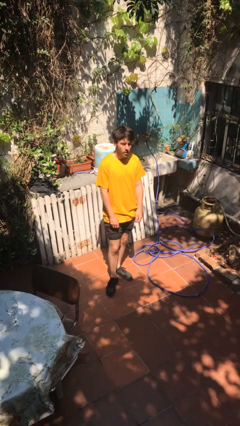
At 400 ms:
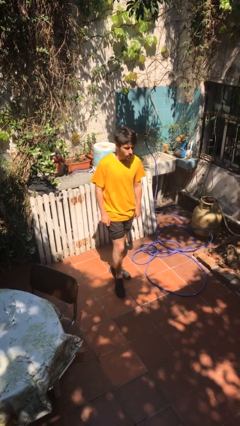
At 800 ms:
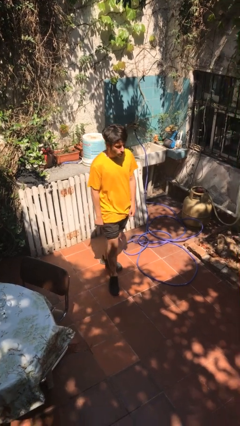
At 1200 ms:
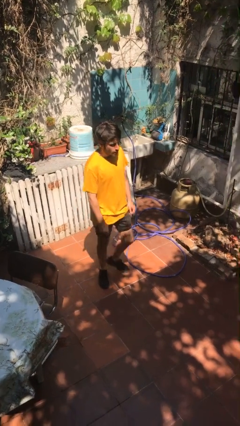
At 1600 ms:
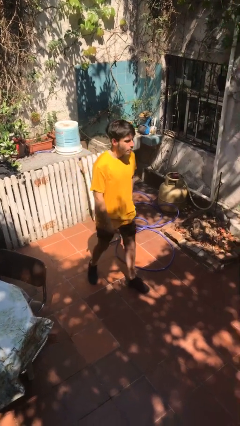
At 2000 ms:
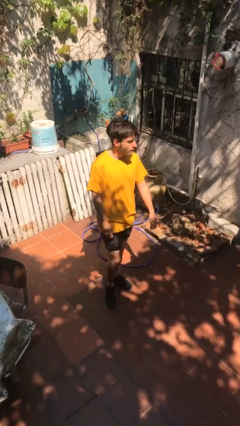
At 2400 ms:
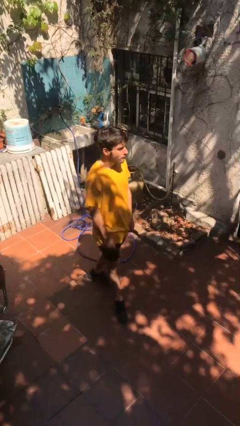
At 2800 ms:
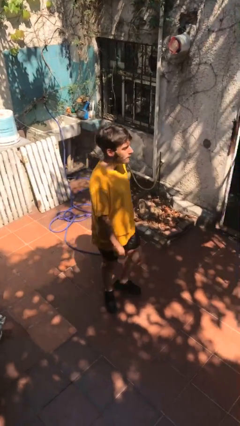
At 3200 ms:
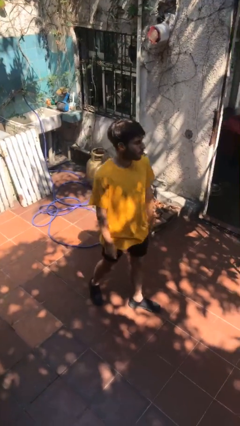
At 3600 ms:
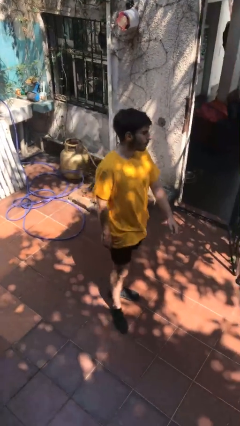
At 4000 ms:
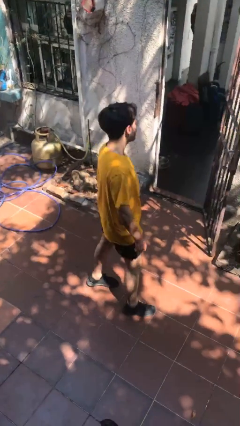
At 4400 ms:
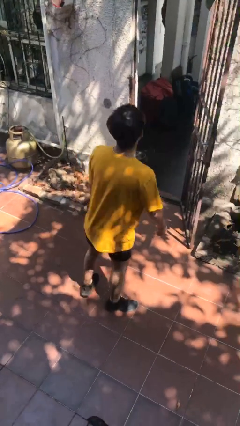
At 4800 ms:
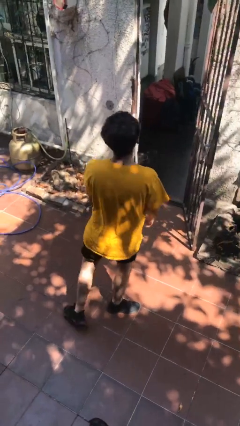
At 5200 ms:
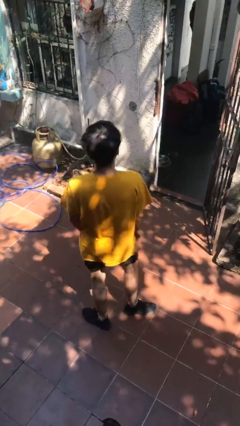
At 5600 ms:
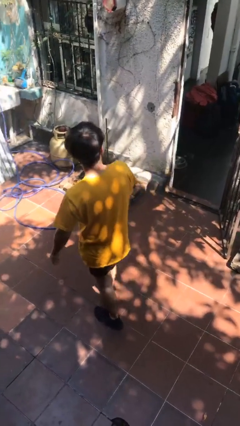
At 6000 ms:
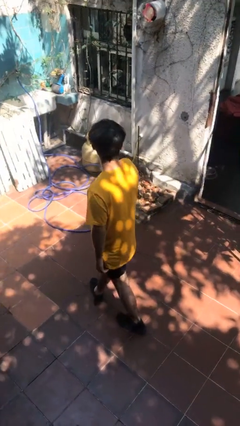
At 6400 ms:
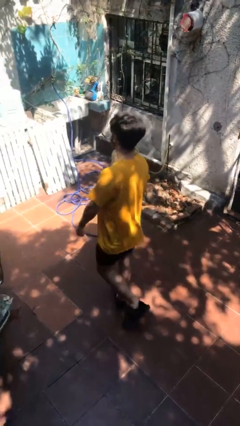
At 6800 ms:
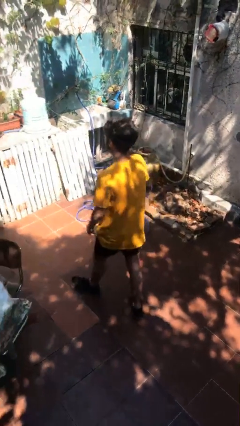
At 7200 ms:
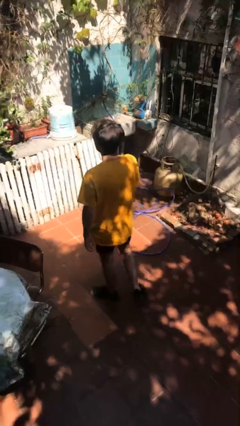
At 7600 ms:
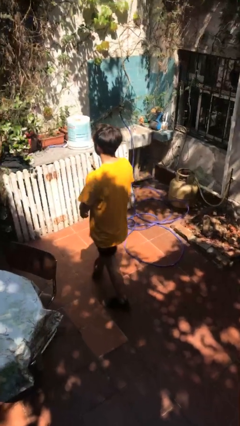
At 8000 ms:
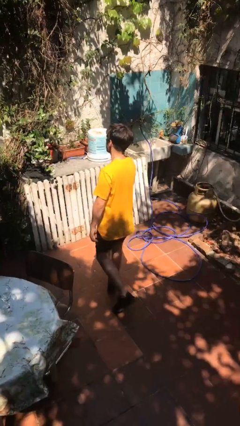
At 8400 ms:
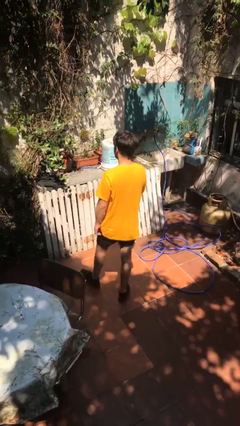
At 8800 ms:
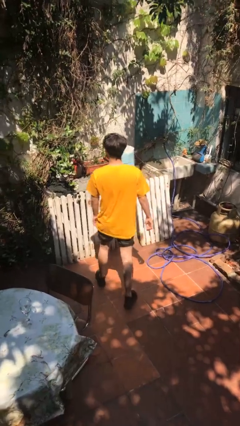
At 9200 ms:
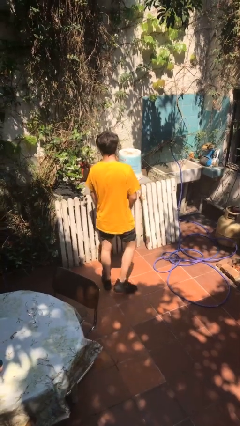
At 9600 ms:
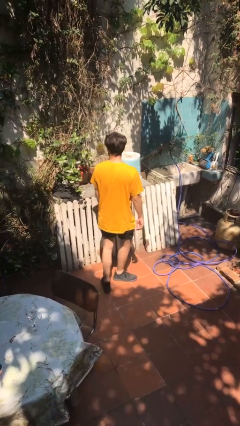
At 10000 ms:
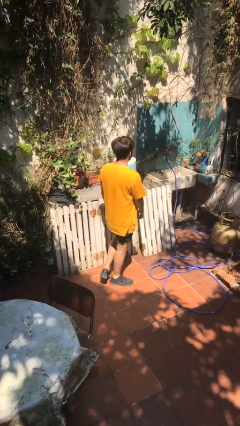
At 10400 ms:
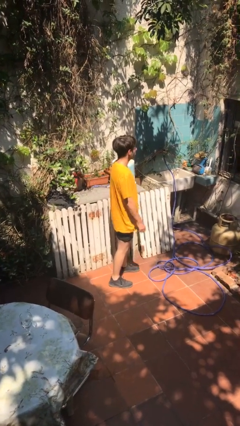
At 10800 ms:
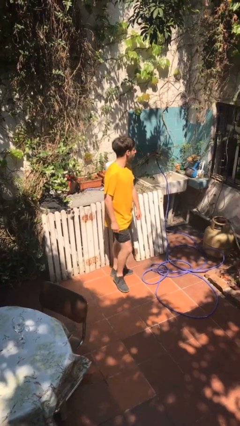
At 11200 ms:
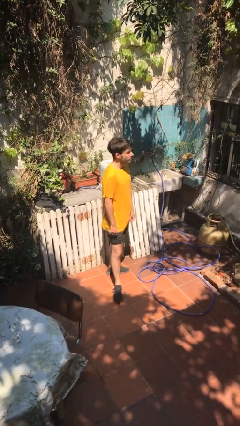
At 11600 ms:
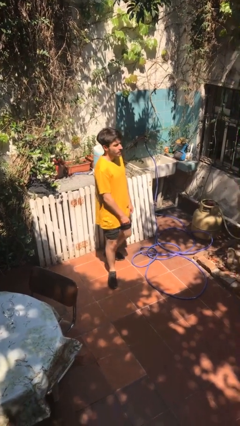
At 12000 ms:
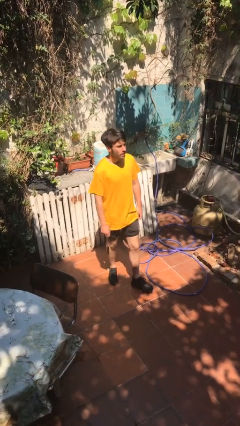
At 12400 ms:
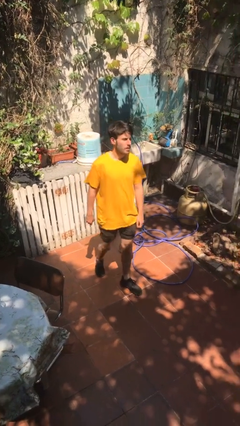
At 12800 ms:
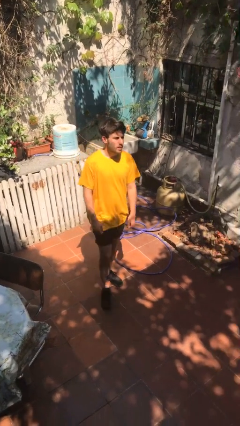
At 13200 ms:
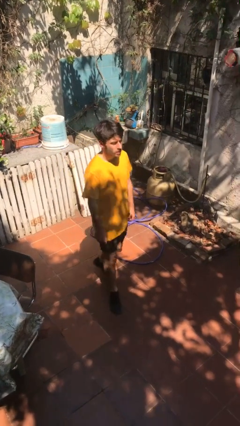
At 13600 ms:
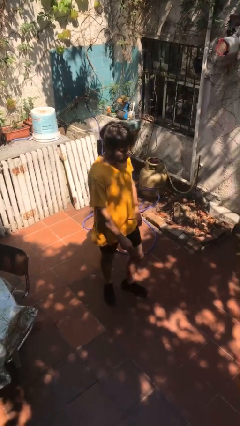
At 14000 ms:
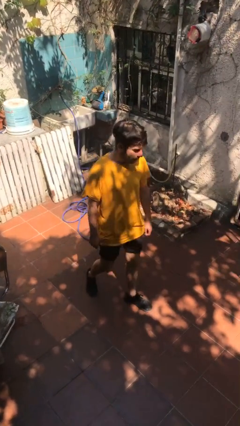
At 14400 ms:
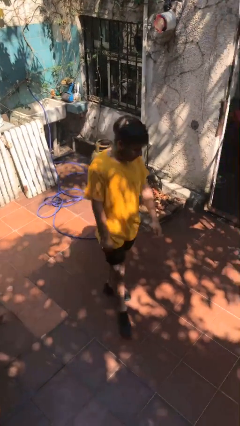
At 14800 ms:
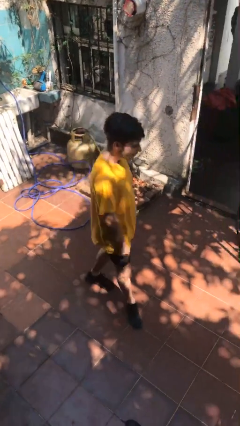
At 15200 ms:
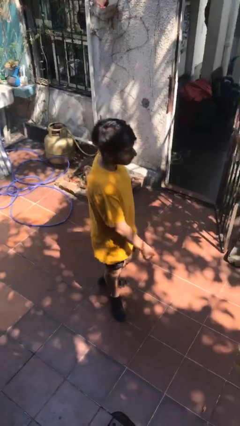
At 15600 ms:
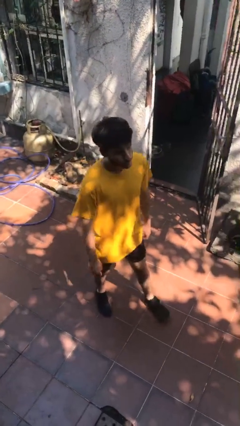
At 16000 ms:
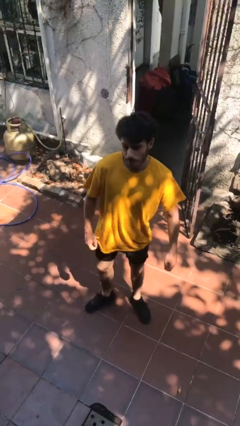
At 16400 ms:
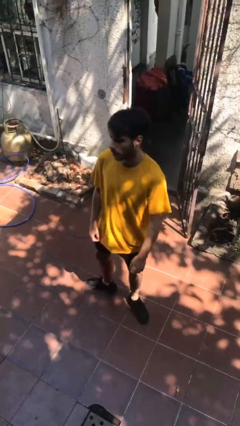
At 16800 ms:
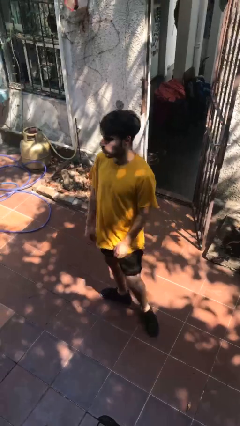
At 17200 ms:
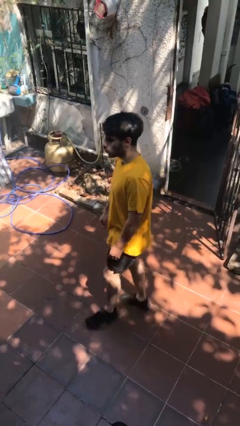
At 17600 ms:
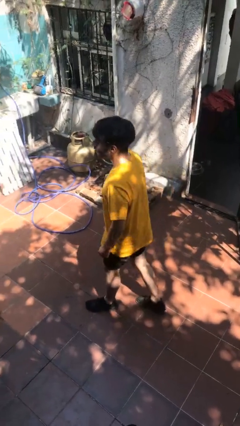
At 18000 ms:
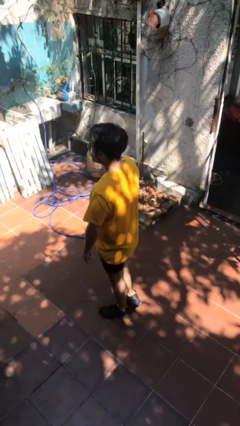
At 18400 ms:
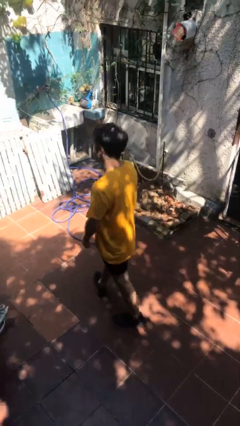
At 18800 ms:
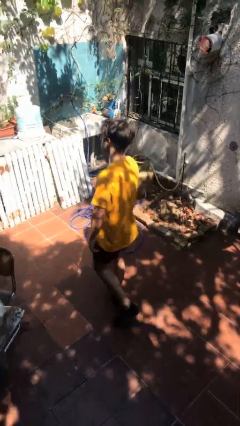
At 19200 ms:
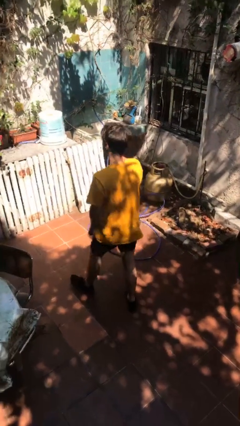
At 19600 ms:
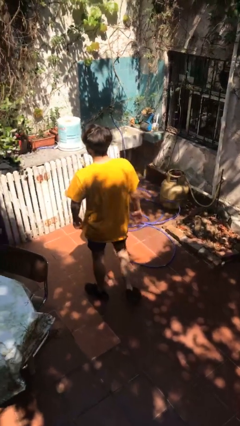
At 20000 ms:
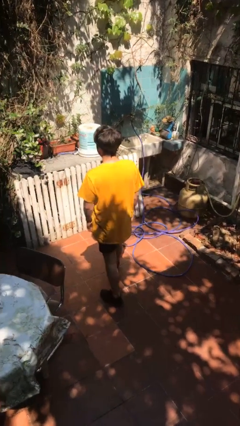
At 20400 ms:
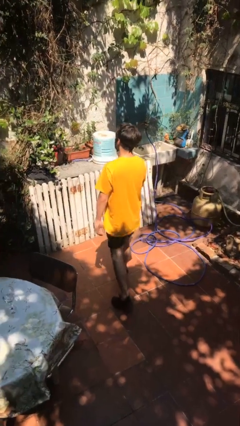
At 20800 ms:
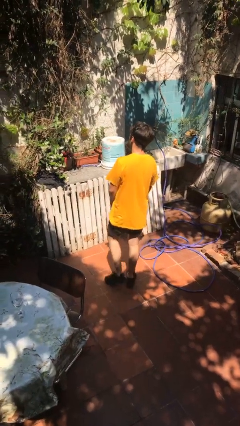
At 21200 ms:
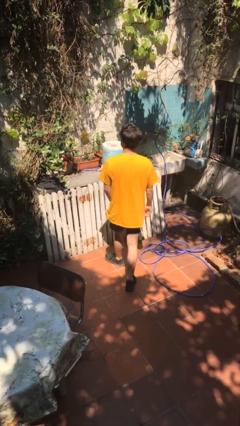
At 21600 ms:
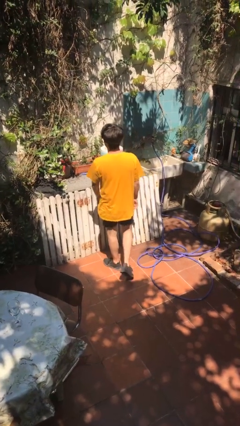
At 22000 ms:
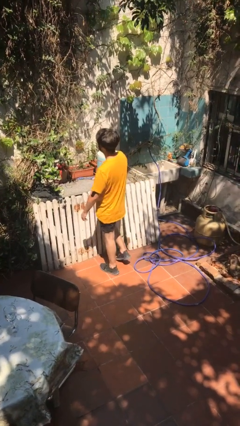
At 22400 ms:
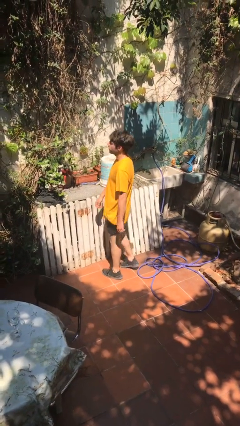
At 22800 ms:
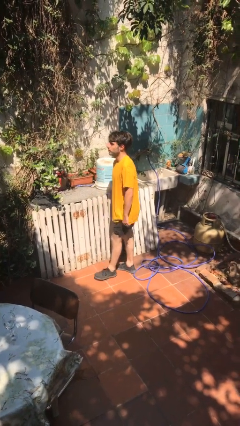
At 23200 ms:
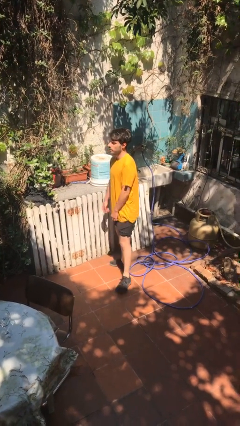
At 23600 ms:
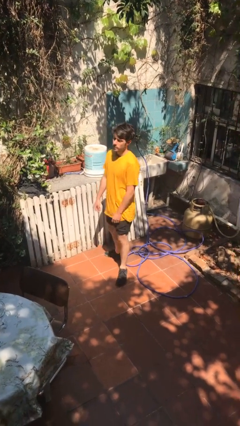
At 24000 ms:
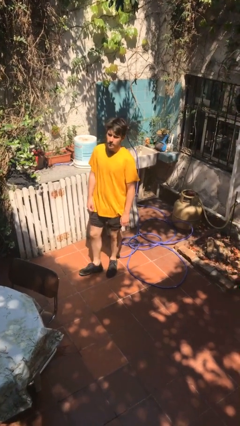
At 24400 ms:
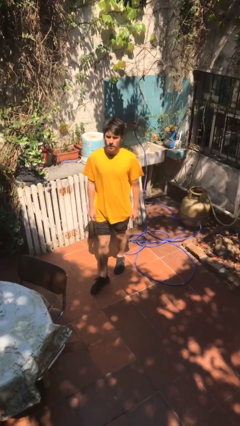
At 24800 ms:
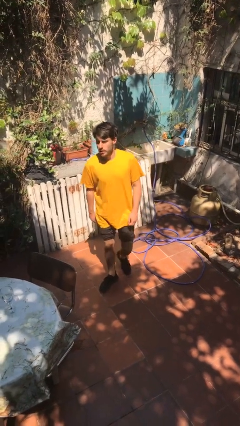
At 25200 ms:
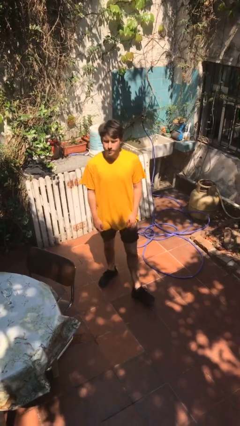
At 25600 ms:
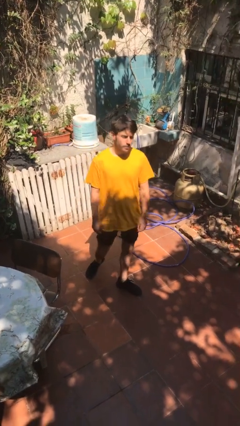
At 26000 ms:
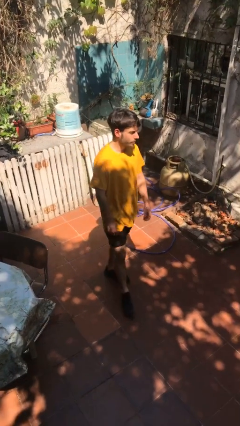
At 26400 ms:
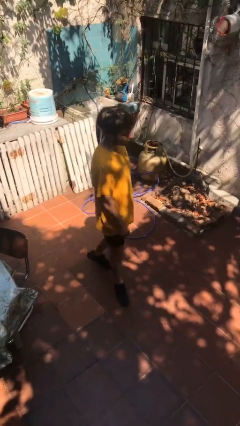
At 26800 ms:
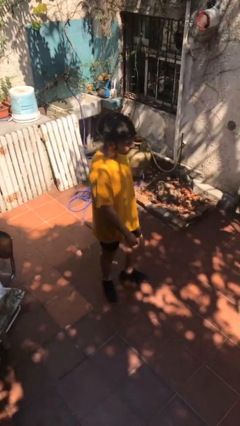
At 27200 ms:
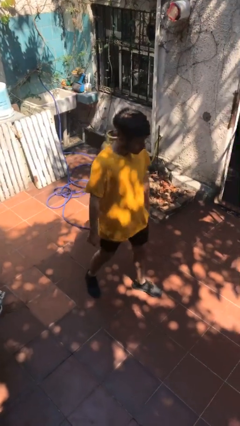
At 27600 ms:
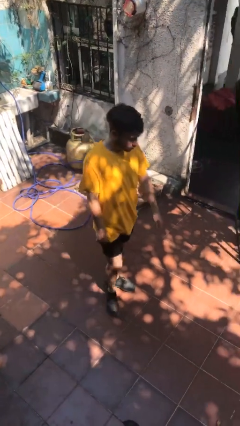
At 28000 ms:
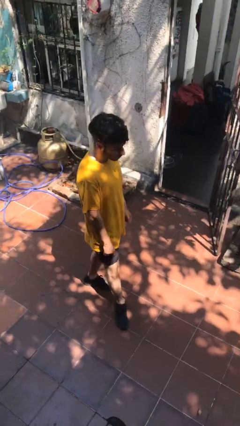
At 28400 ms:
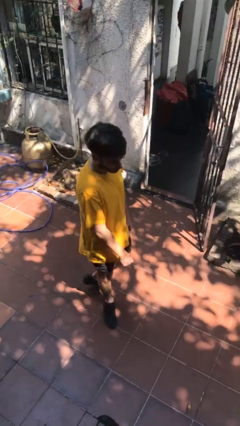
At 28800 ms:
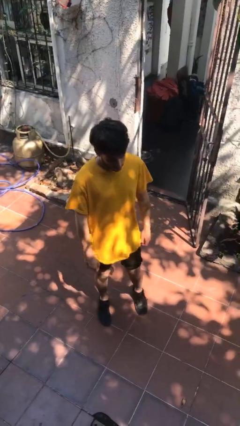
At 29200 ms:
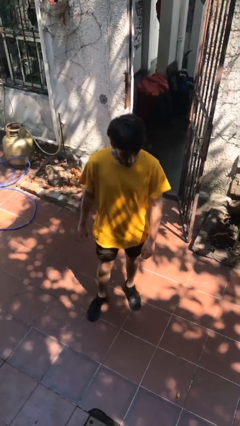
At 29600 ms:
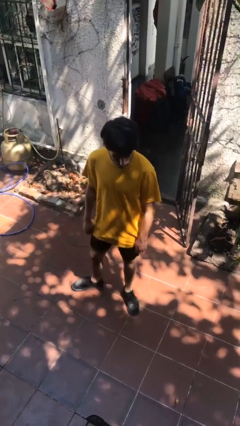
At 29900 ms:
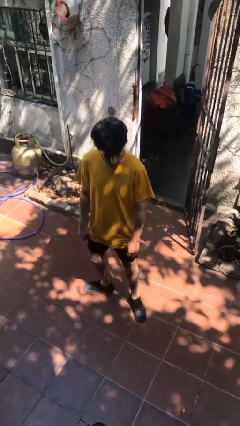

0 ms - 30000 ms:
person walks

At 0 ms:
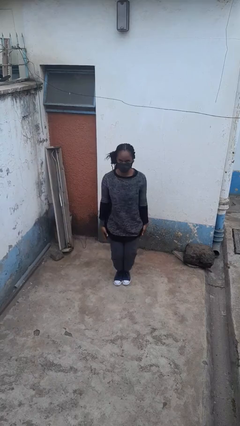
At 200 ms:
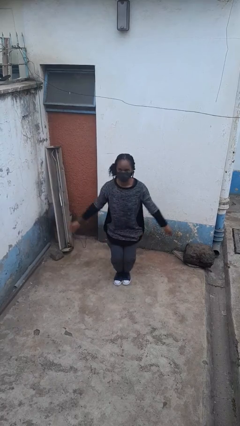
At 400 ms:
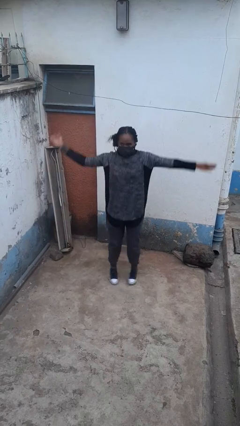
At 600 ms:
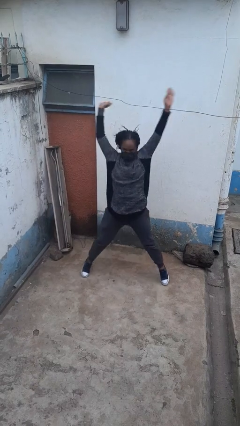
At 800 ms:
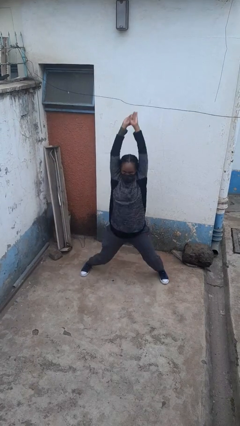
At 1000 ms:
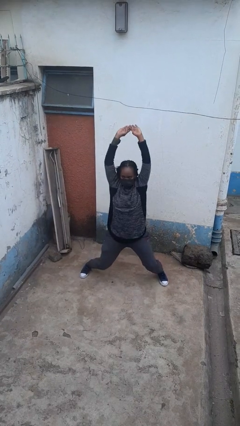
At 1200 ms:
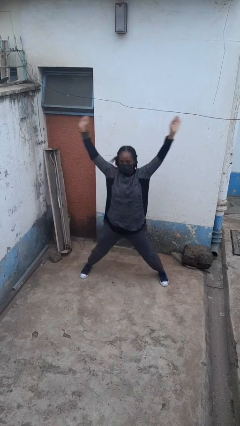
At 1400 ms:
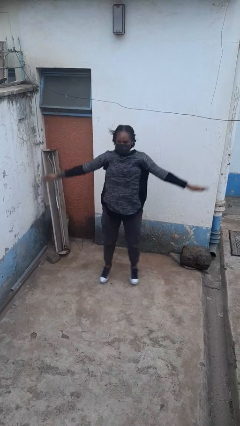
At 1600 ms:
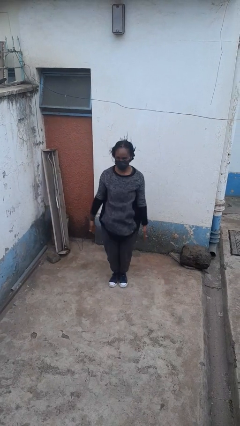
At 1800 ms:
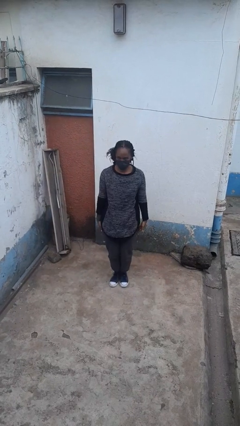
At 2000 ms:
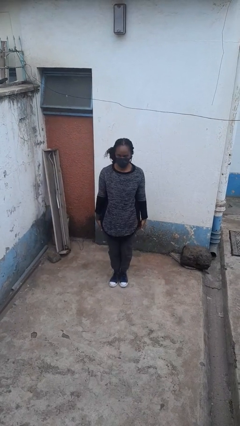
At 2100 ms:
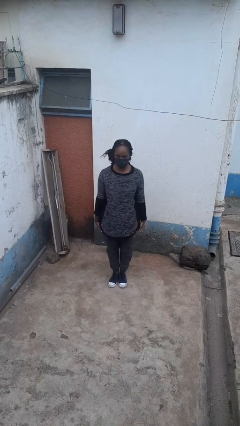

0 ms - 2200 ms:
person exercises with jumping jacks

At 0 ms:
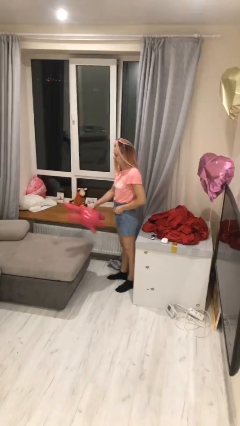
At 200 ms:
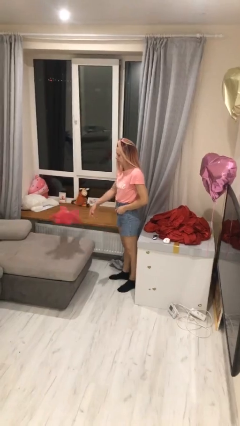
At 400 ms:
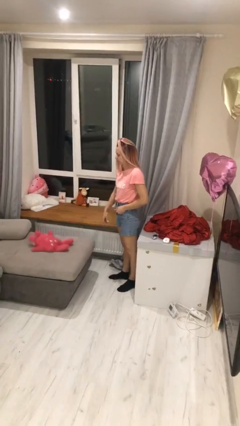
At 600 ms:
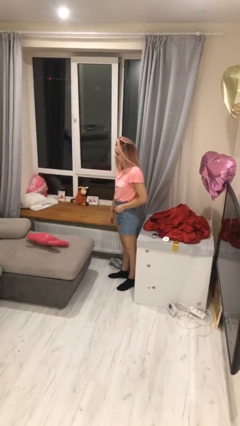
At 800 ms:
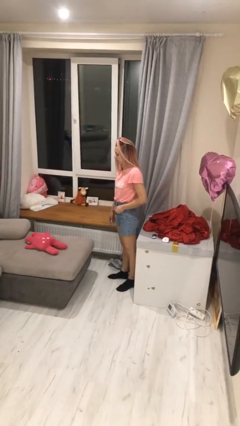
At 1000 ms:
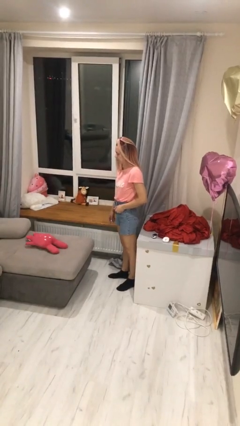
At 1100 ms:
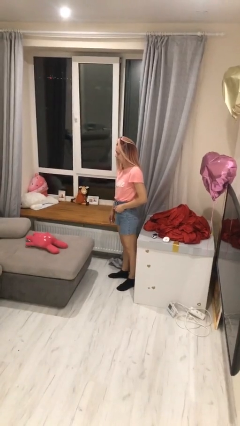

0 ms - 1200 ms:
person throws object on bed
